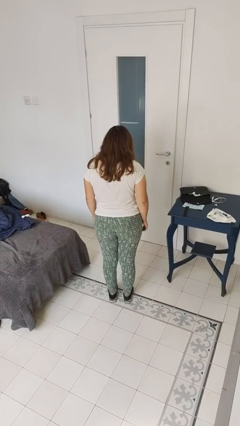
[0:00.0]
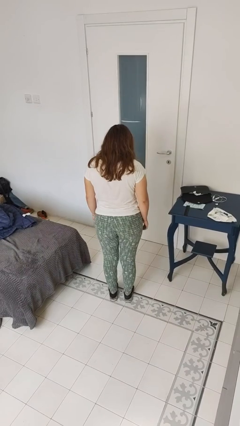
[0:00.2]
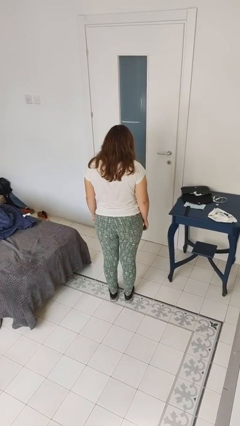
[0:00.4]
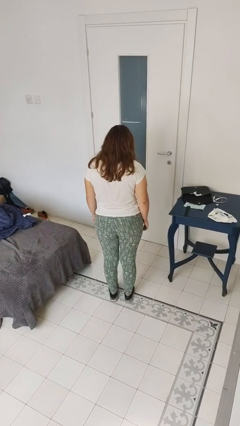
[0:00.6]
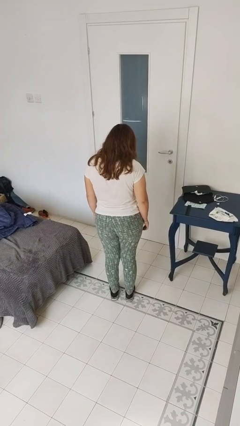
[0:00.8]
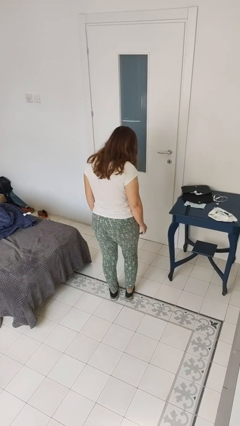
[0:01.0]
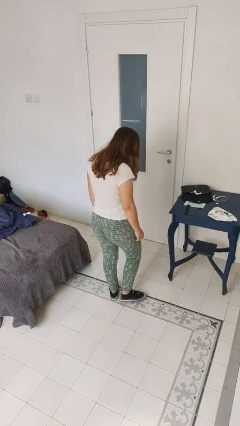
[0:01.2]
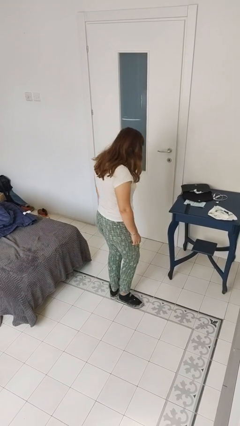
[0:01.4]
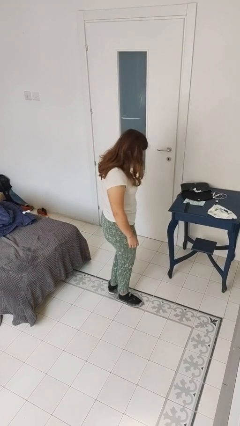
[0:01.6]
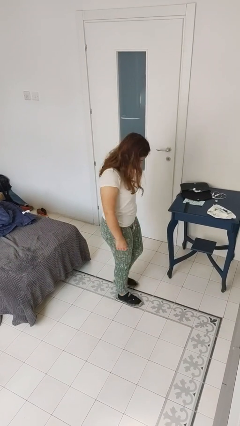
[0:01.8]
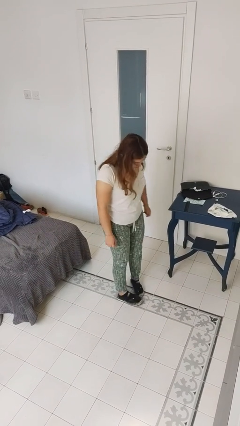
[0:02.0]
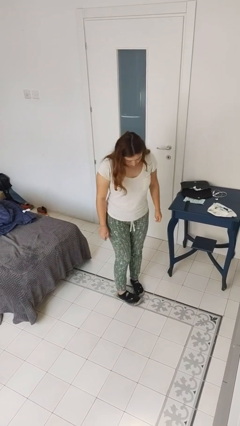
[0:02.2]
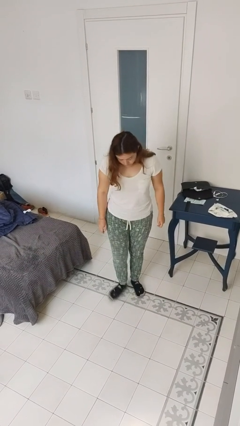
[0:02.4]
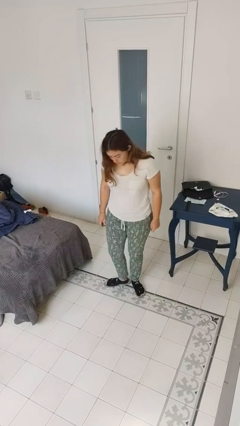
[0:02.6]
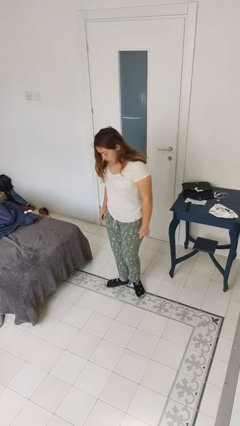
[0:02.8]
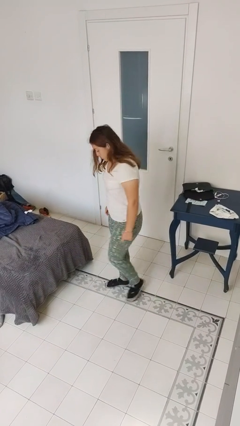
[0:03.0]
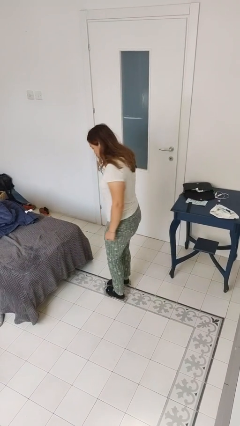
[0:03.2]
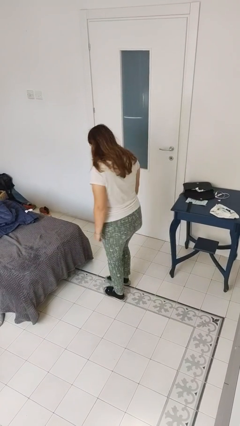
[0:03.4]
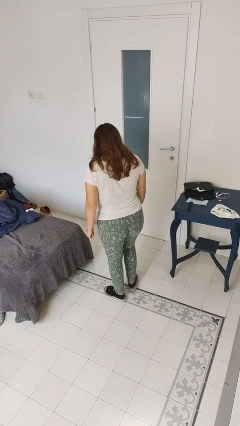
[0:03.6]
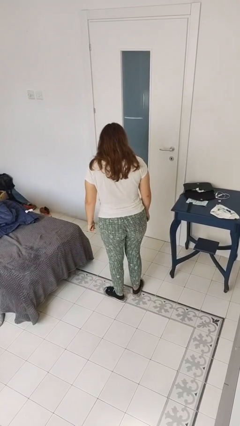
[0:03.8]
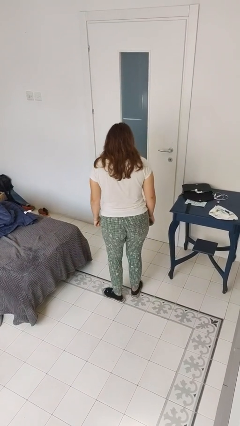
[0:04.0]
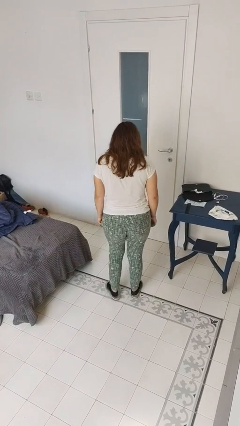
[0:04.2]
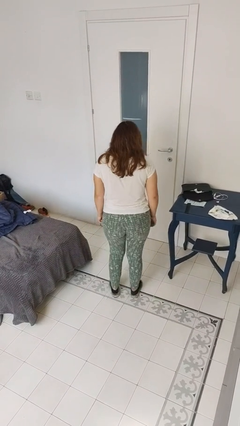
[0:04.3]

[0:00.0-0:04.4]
person twirls

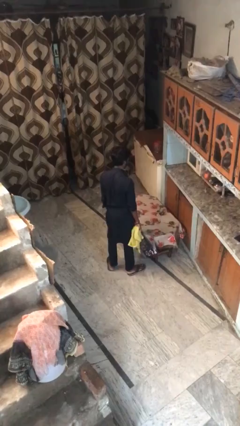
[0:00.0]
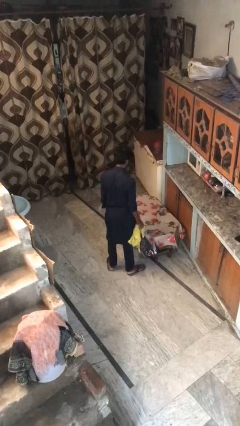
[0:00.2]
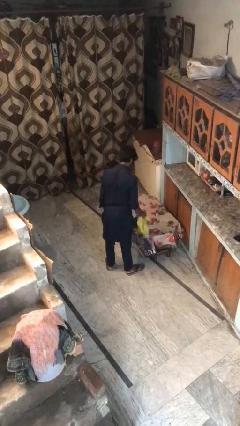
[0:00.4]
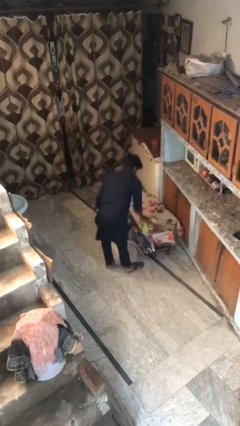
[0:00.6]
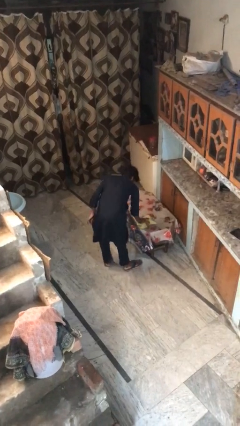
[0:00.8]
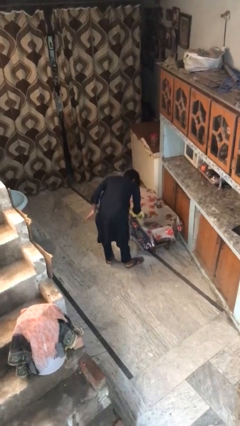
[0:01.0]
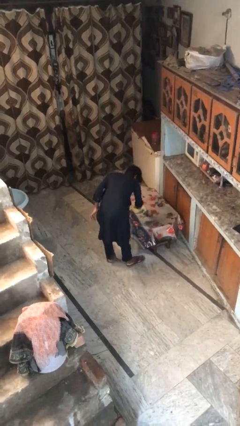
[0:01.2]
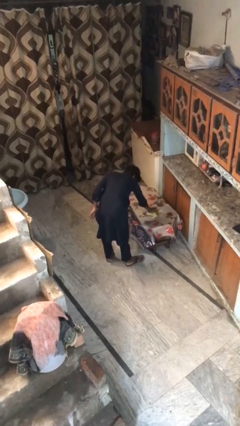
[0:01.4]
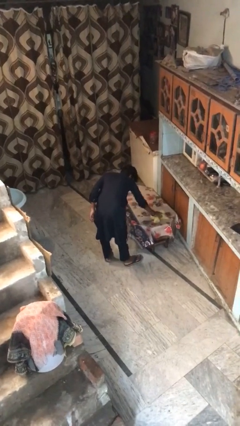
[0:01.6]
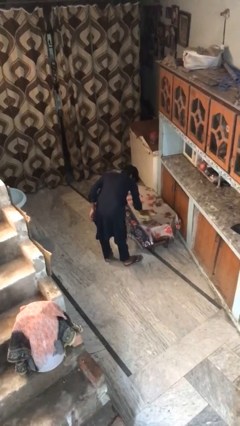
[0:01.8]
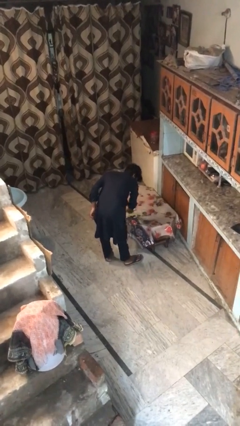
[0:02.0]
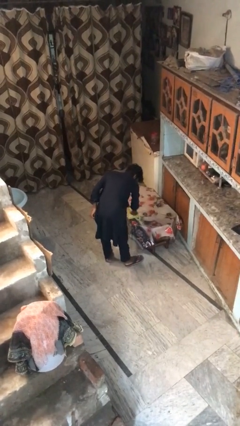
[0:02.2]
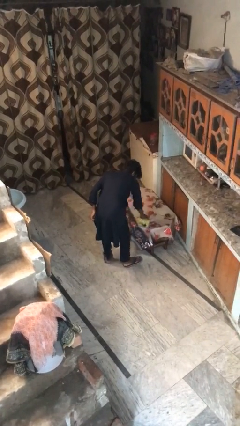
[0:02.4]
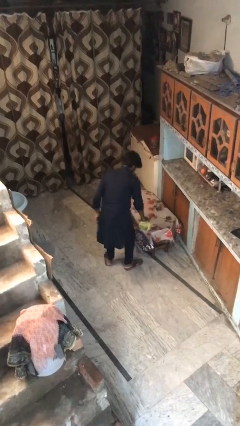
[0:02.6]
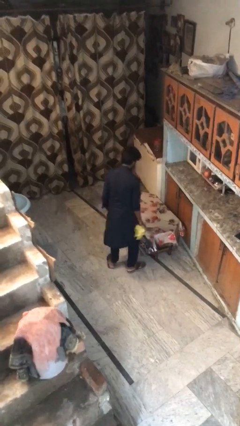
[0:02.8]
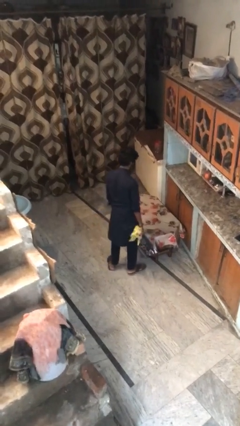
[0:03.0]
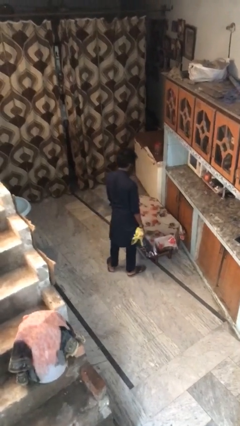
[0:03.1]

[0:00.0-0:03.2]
person cleans table with rag

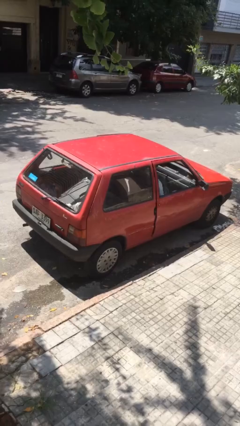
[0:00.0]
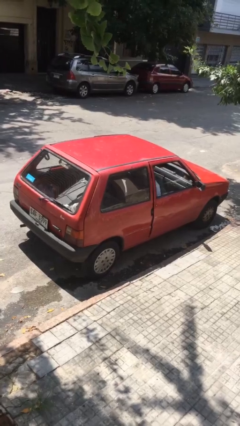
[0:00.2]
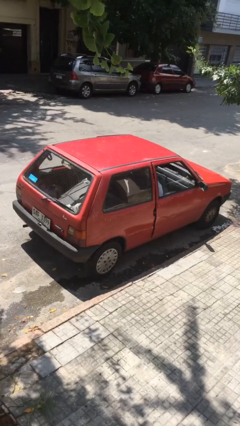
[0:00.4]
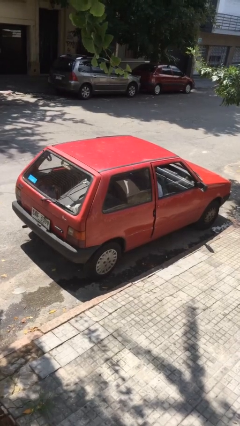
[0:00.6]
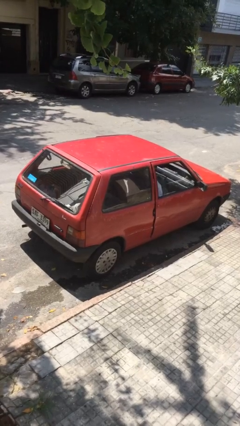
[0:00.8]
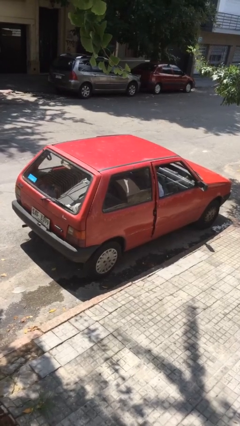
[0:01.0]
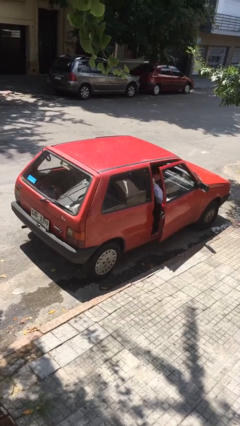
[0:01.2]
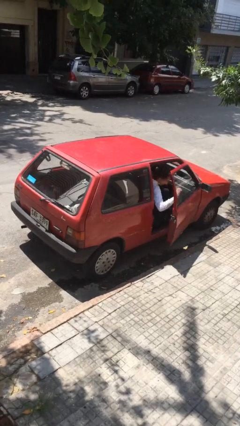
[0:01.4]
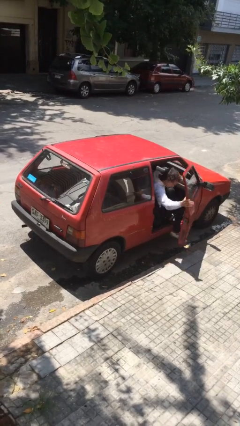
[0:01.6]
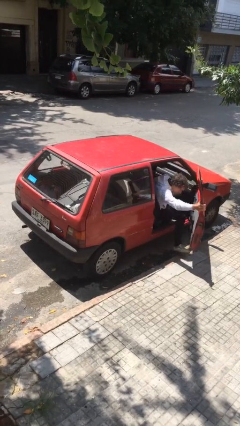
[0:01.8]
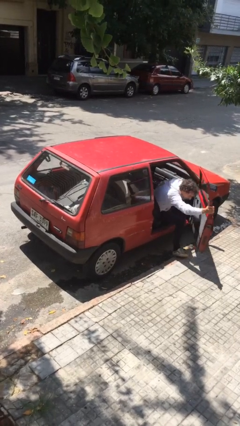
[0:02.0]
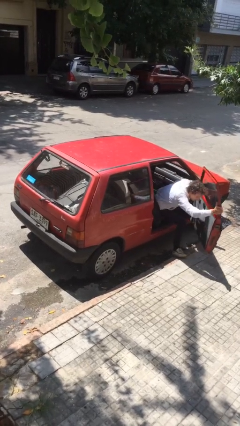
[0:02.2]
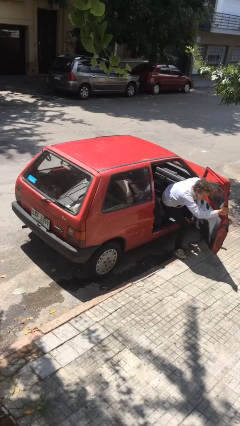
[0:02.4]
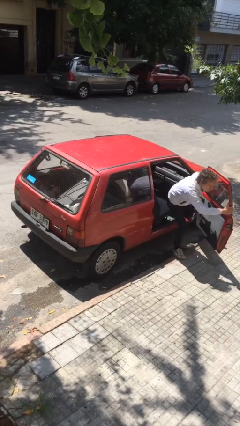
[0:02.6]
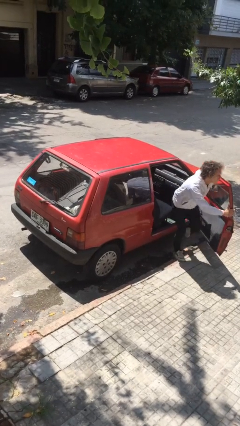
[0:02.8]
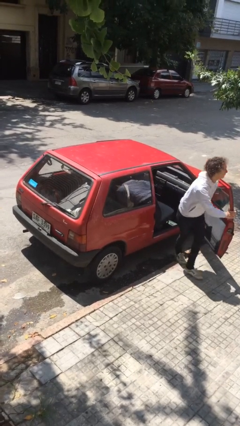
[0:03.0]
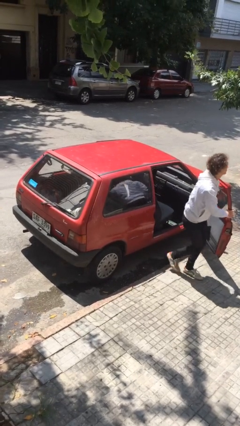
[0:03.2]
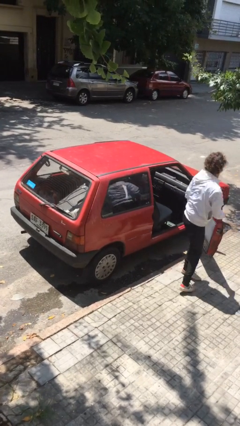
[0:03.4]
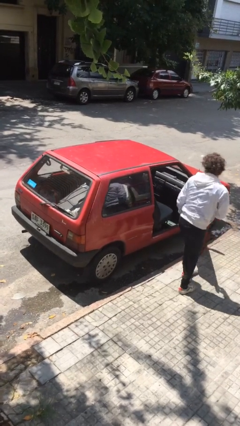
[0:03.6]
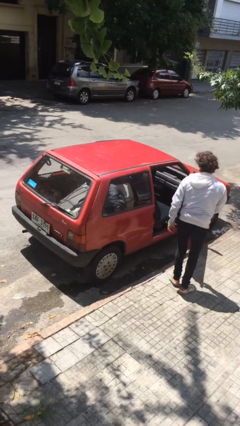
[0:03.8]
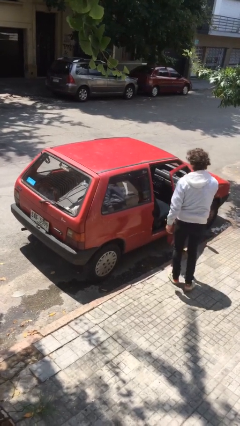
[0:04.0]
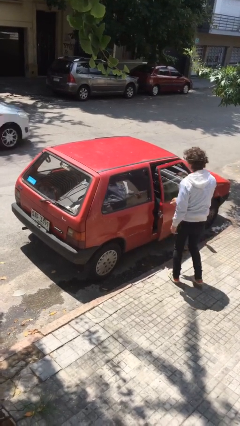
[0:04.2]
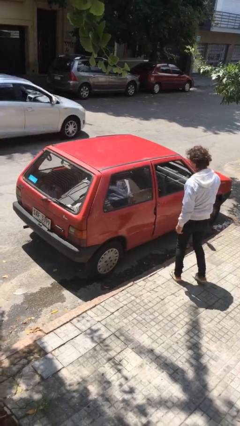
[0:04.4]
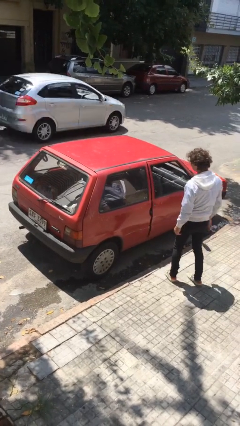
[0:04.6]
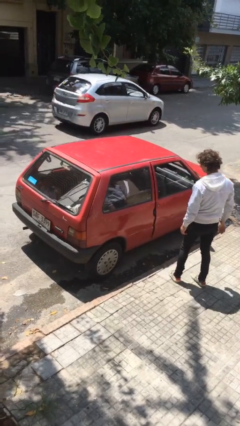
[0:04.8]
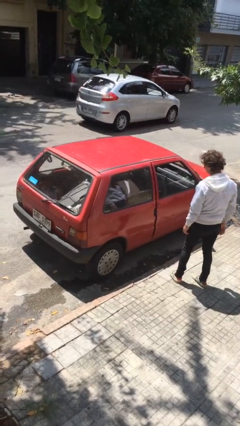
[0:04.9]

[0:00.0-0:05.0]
car drops off person

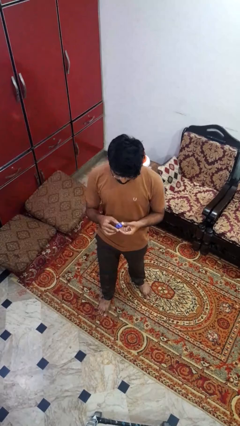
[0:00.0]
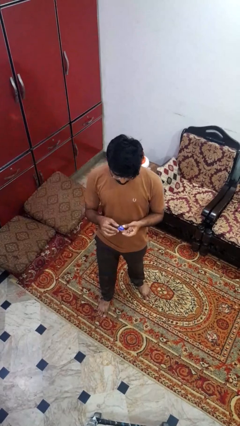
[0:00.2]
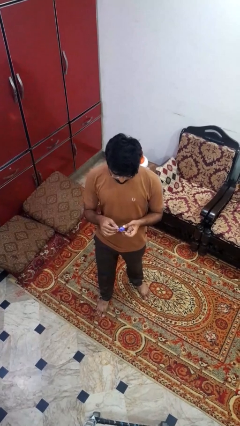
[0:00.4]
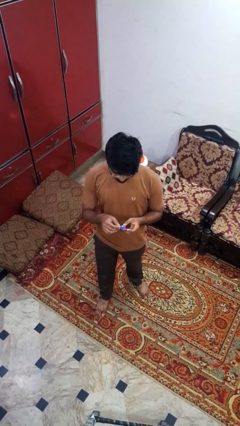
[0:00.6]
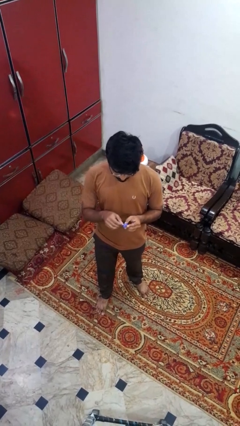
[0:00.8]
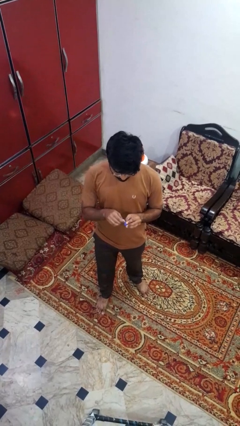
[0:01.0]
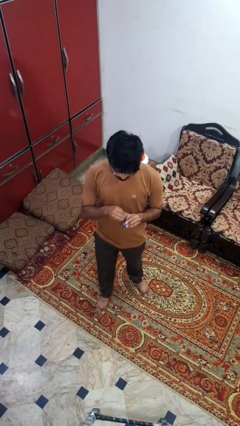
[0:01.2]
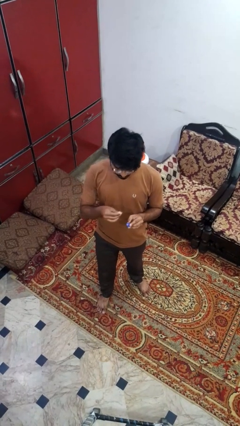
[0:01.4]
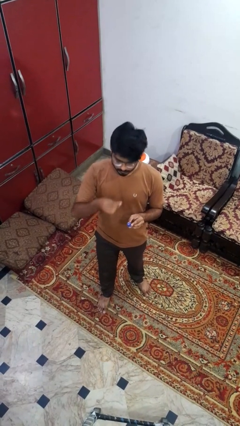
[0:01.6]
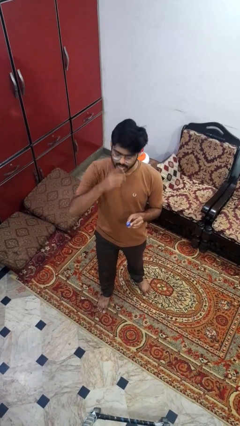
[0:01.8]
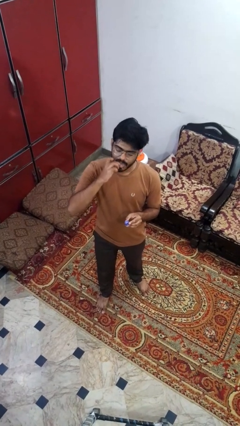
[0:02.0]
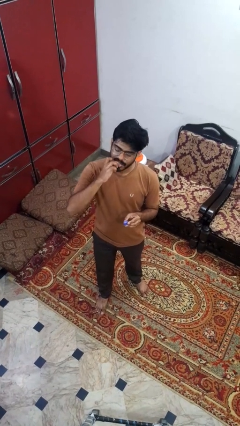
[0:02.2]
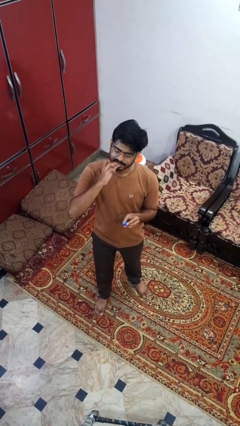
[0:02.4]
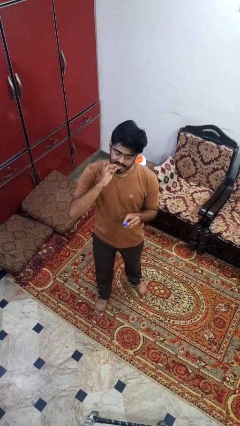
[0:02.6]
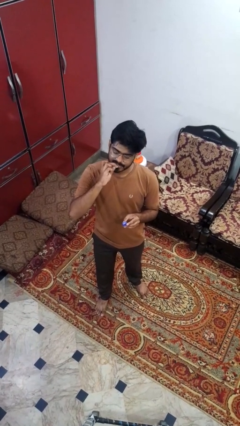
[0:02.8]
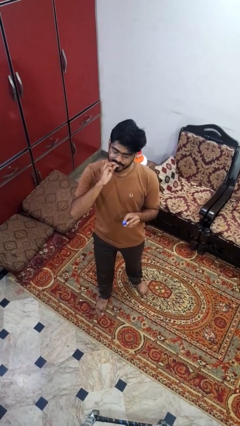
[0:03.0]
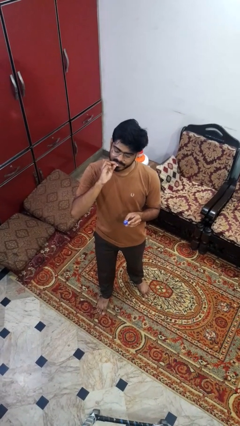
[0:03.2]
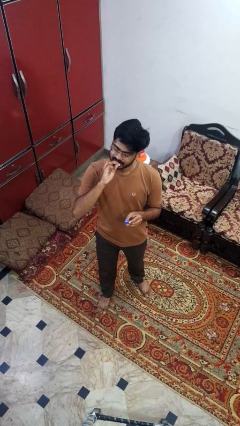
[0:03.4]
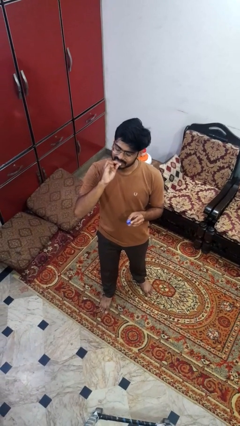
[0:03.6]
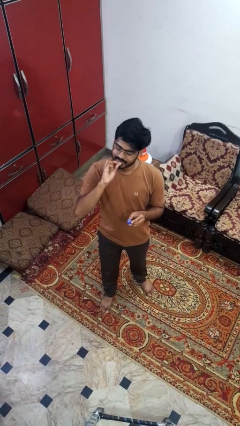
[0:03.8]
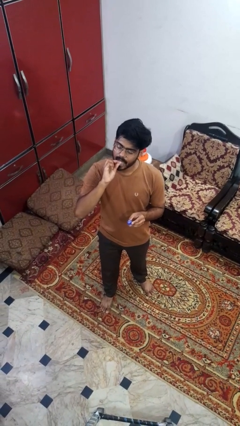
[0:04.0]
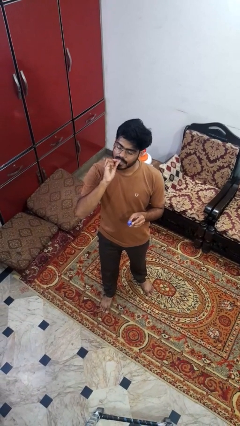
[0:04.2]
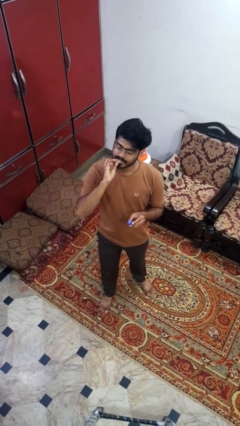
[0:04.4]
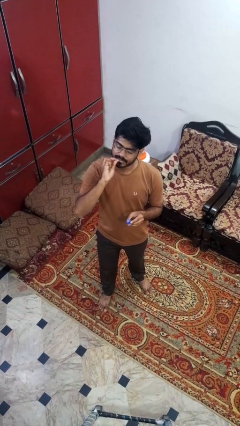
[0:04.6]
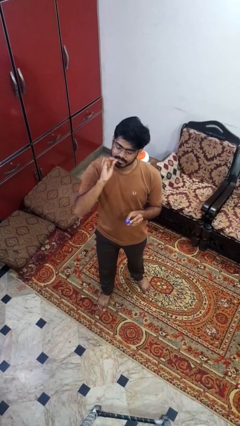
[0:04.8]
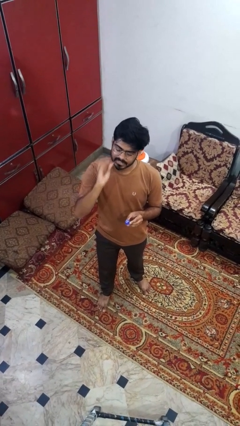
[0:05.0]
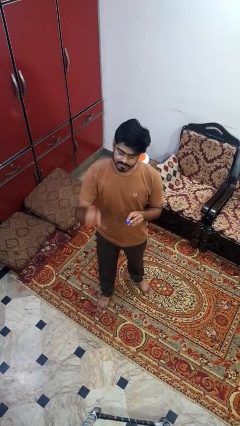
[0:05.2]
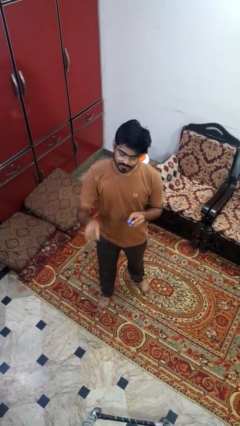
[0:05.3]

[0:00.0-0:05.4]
person flosses
